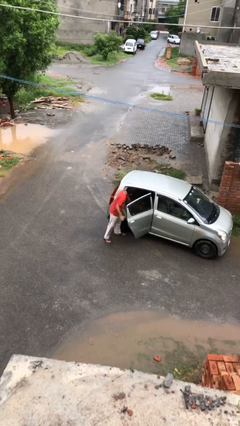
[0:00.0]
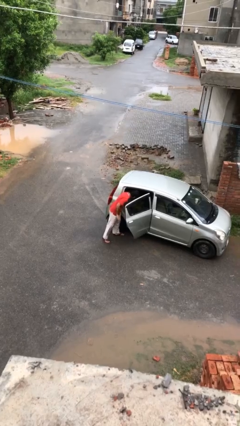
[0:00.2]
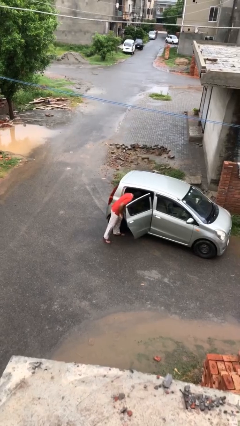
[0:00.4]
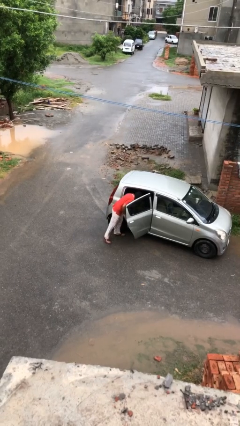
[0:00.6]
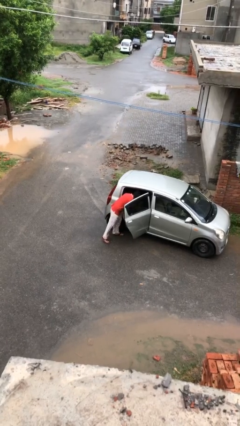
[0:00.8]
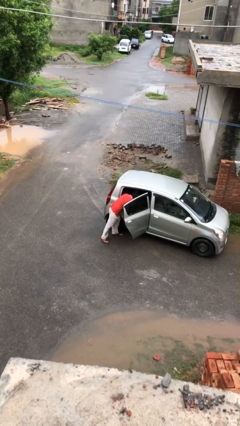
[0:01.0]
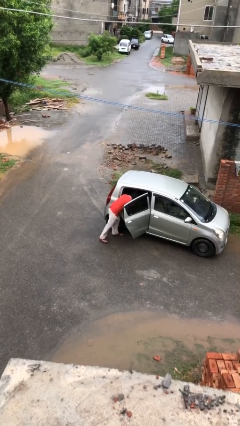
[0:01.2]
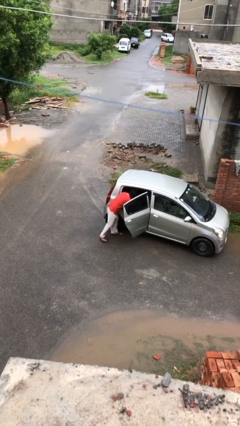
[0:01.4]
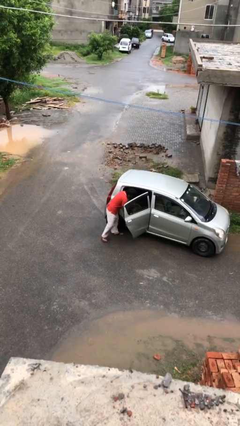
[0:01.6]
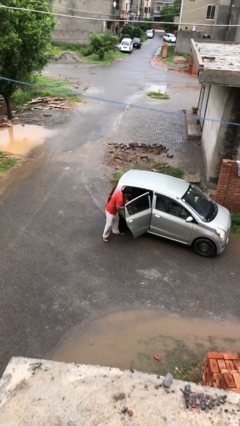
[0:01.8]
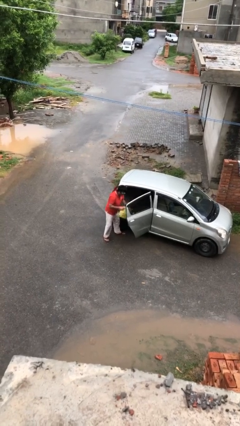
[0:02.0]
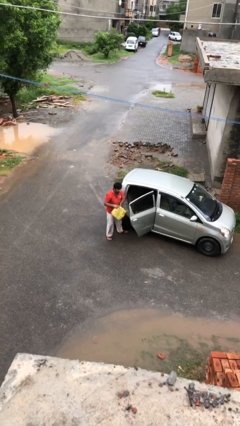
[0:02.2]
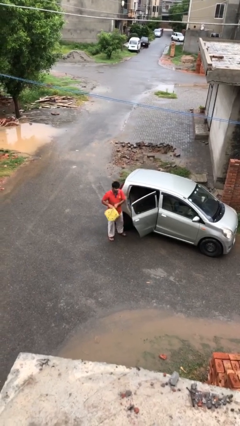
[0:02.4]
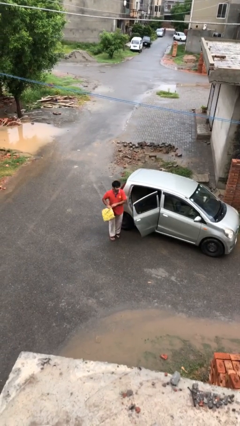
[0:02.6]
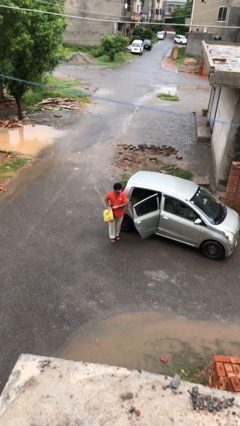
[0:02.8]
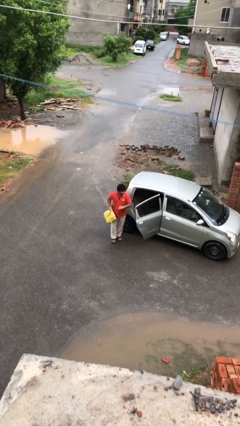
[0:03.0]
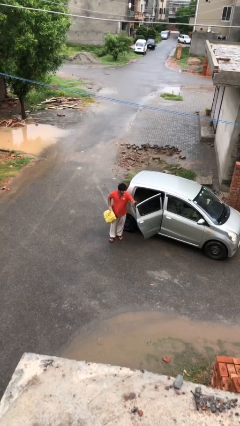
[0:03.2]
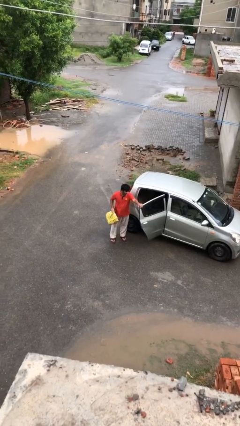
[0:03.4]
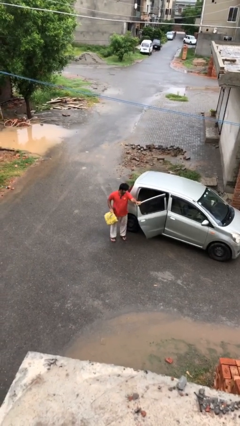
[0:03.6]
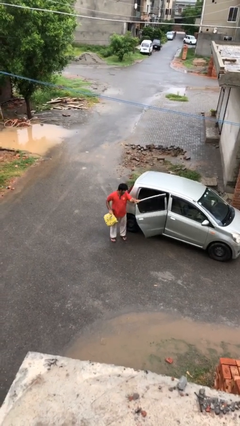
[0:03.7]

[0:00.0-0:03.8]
person unloads car

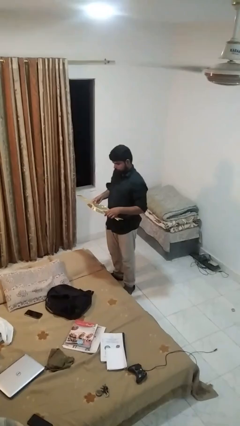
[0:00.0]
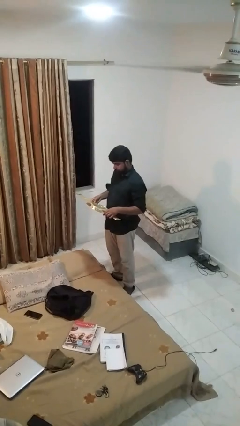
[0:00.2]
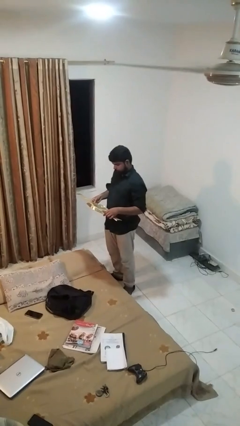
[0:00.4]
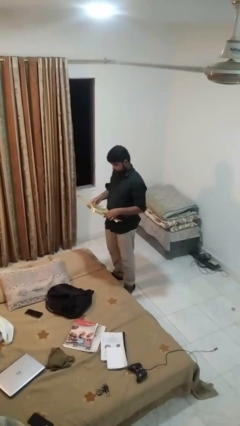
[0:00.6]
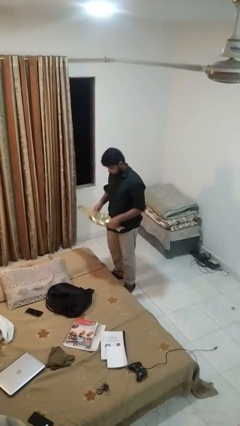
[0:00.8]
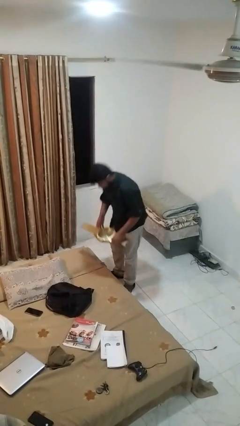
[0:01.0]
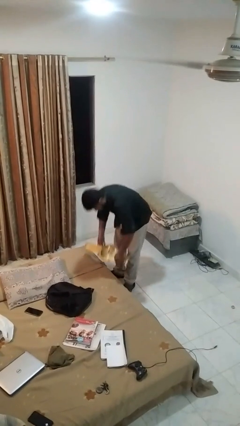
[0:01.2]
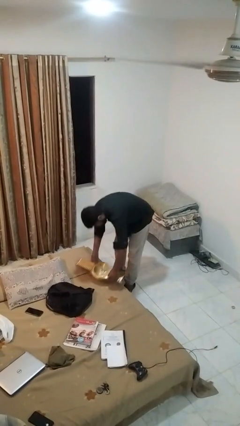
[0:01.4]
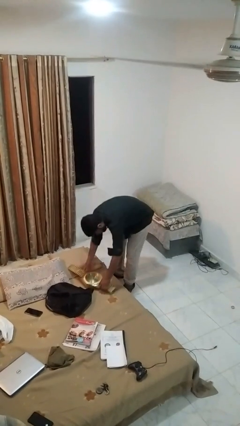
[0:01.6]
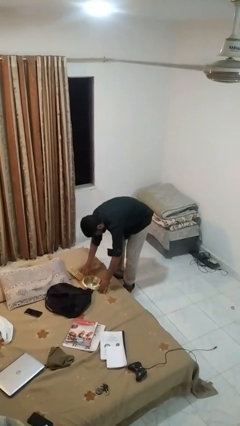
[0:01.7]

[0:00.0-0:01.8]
person puts down object on bed

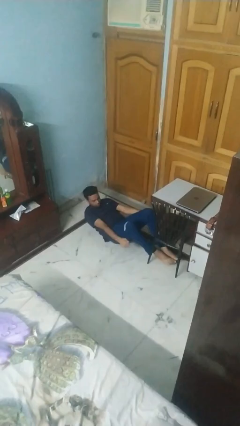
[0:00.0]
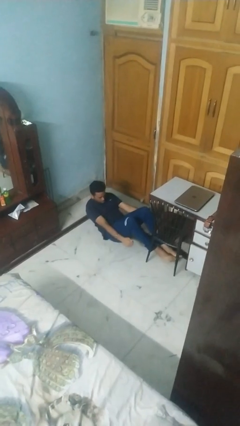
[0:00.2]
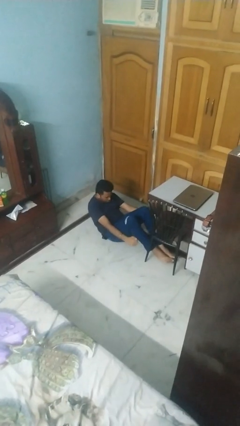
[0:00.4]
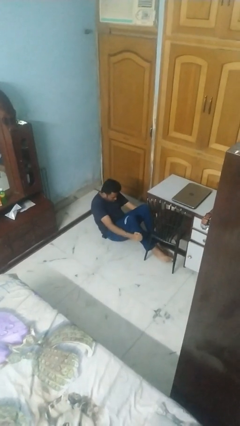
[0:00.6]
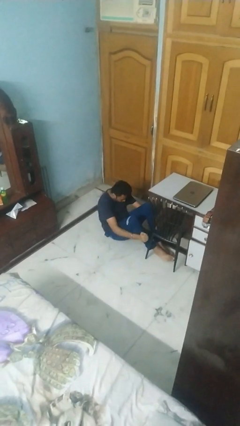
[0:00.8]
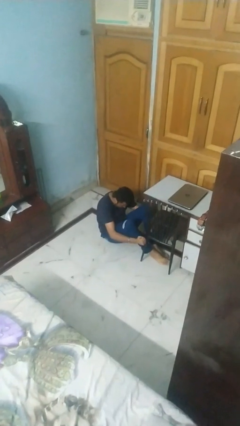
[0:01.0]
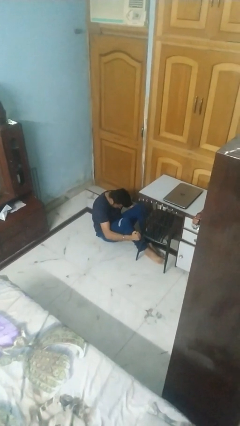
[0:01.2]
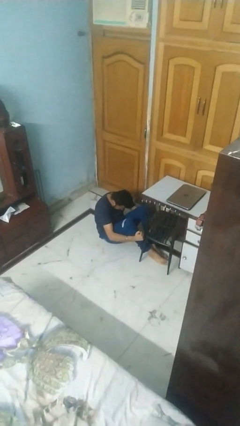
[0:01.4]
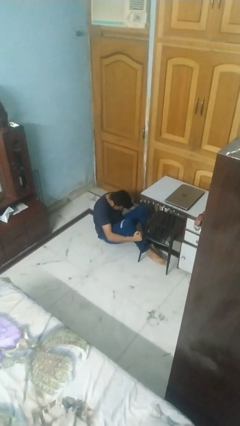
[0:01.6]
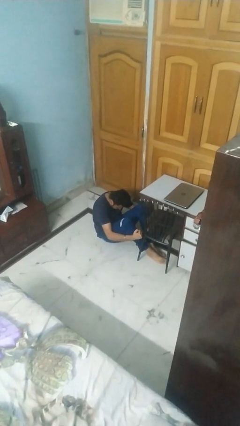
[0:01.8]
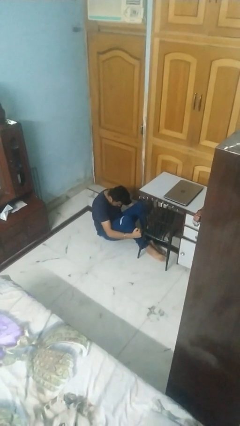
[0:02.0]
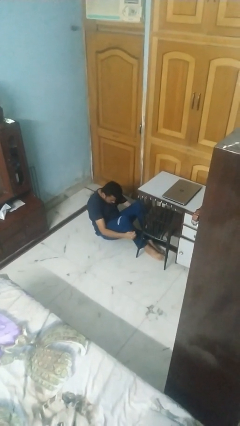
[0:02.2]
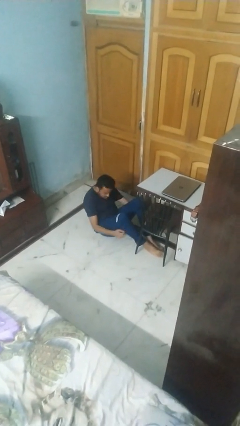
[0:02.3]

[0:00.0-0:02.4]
person exercises with situp

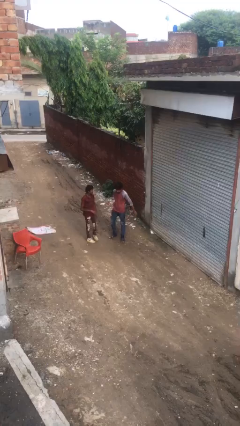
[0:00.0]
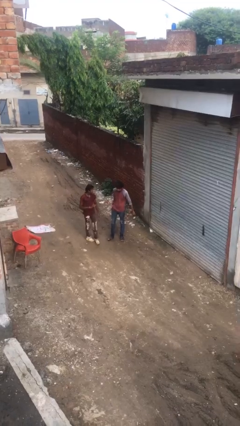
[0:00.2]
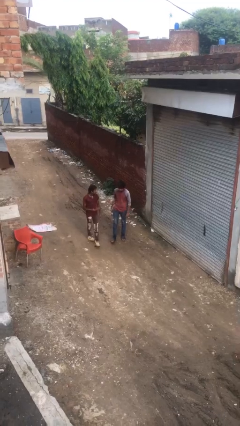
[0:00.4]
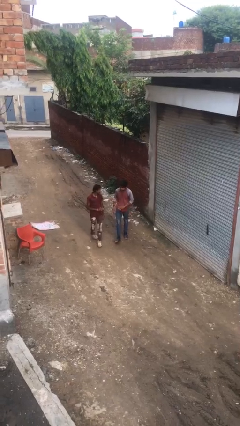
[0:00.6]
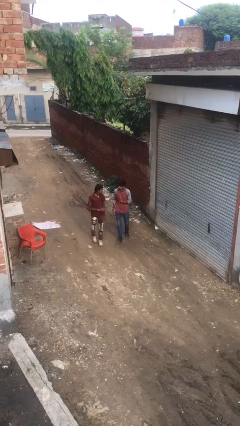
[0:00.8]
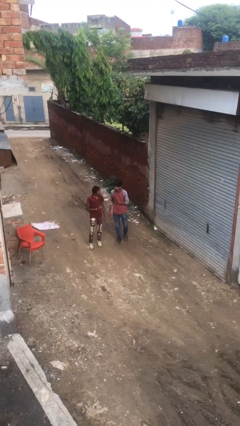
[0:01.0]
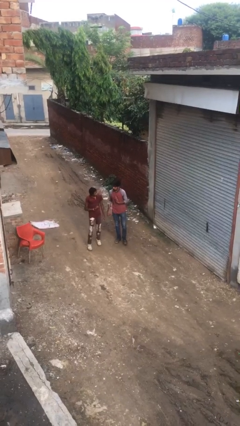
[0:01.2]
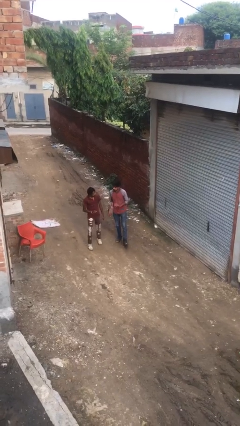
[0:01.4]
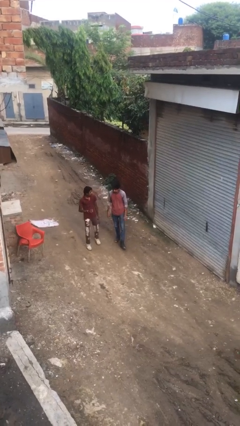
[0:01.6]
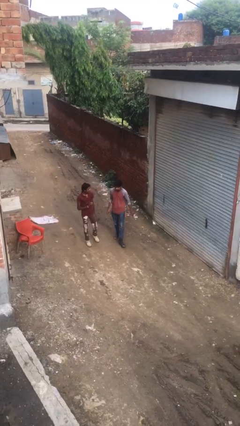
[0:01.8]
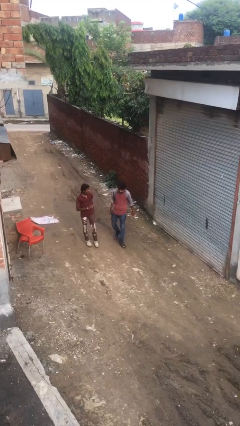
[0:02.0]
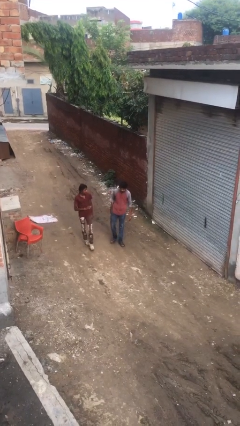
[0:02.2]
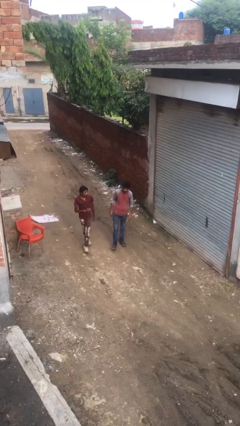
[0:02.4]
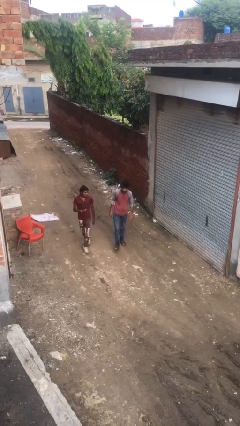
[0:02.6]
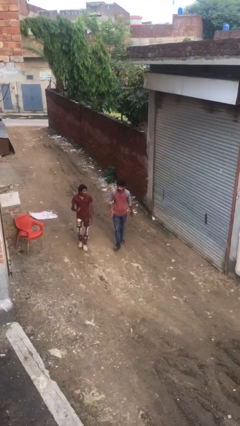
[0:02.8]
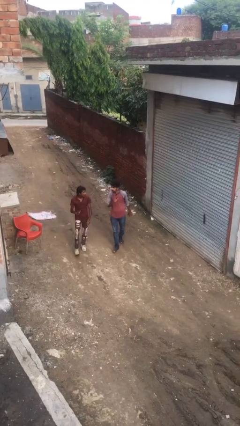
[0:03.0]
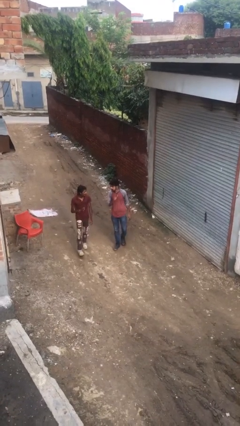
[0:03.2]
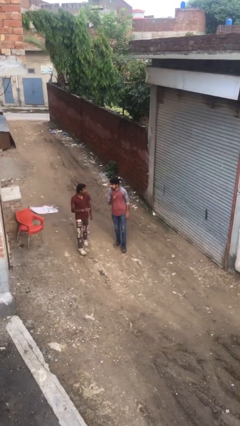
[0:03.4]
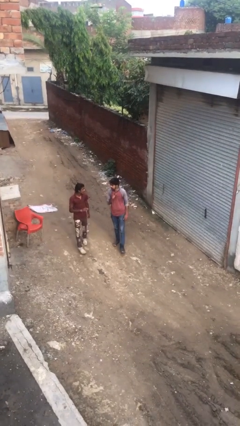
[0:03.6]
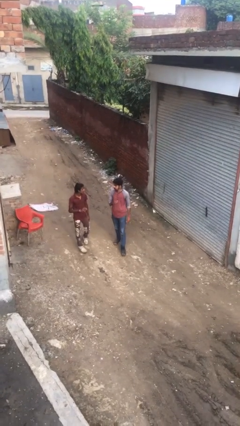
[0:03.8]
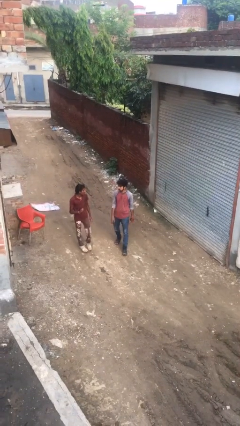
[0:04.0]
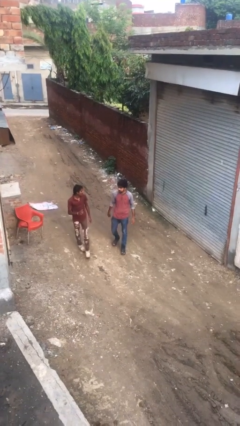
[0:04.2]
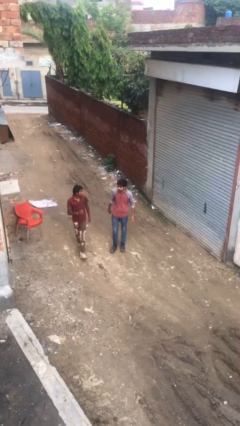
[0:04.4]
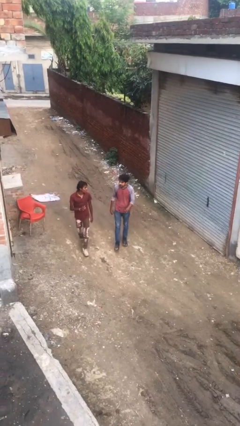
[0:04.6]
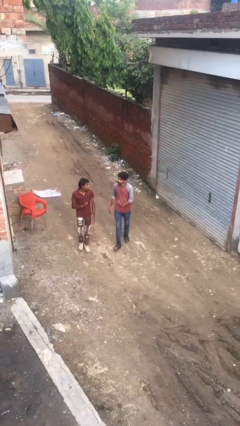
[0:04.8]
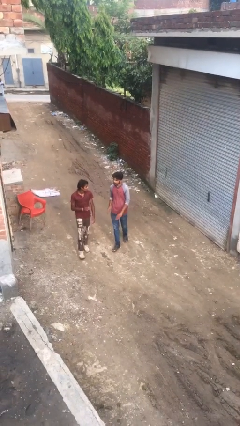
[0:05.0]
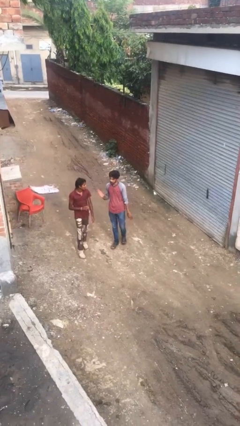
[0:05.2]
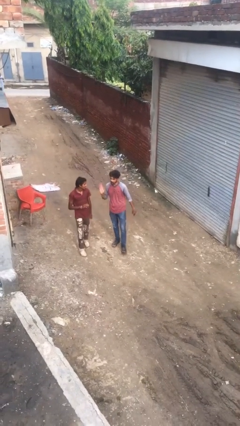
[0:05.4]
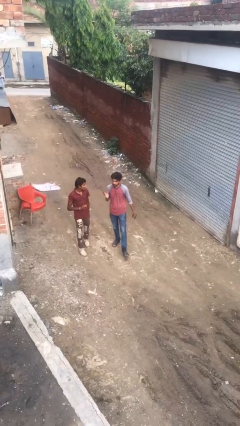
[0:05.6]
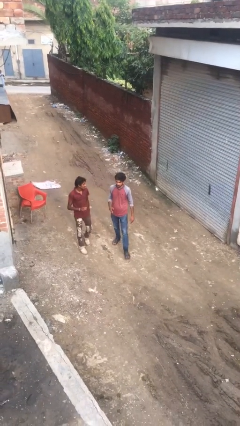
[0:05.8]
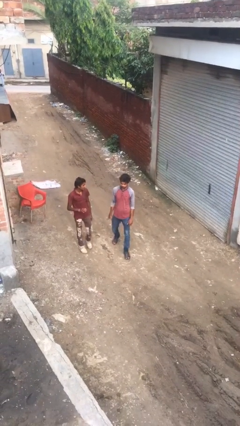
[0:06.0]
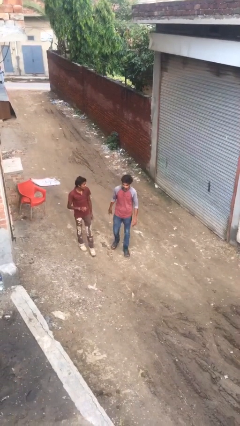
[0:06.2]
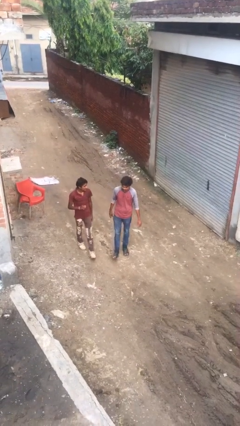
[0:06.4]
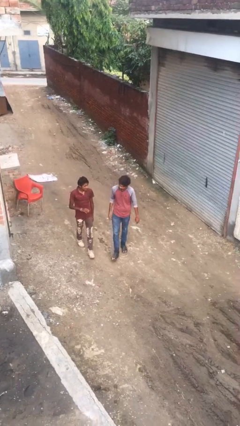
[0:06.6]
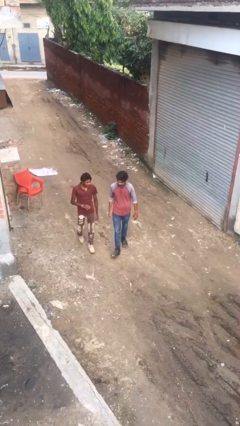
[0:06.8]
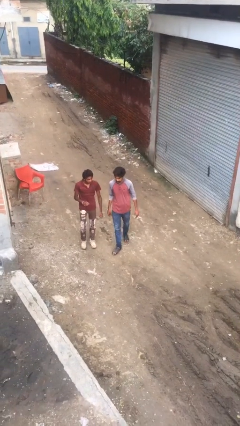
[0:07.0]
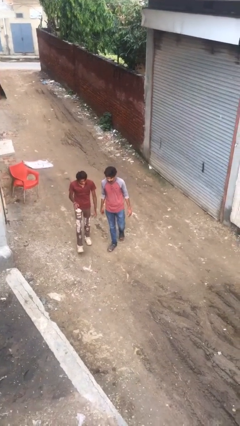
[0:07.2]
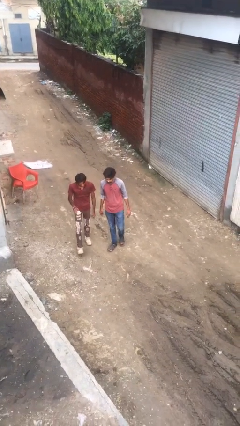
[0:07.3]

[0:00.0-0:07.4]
person talks to person

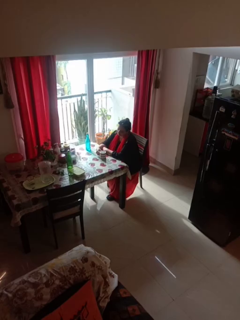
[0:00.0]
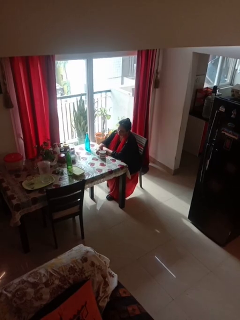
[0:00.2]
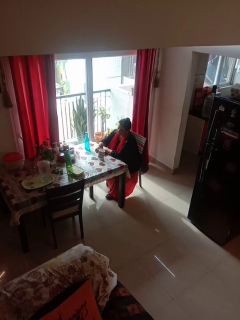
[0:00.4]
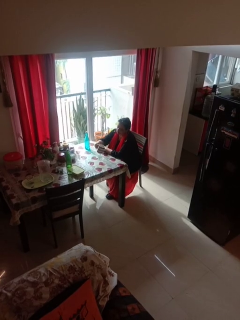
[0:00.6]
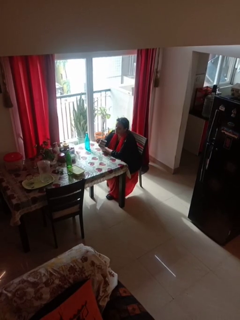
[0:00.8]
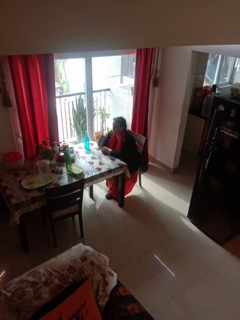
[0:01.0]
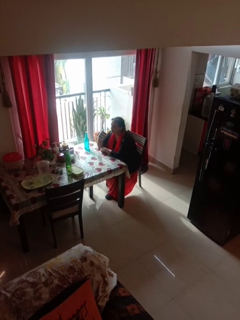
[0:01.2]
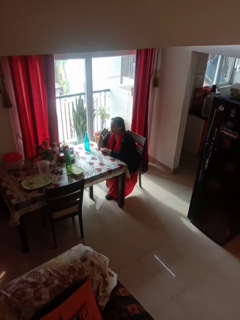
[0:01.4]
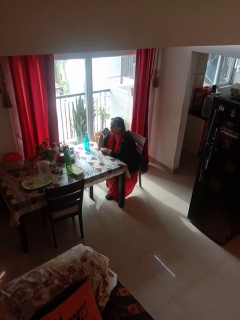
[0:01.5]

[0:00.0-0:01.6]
person picks up object from table

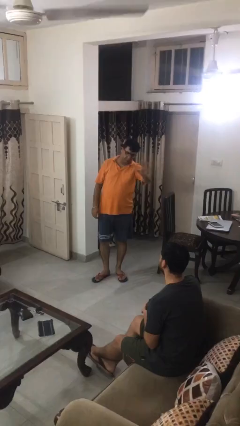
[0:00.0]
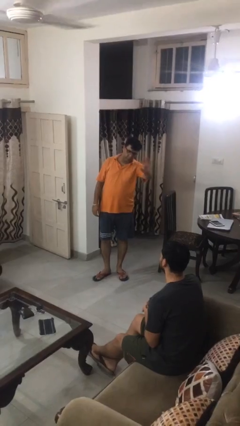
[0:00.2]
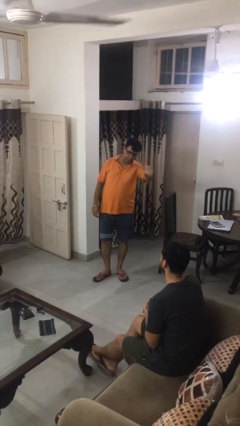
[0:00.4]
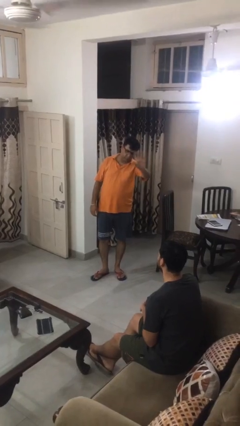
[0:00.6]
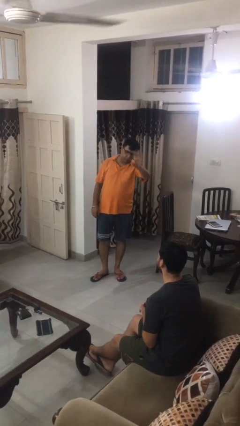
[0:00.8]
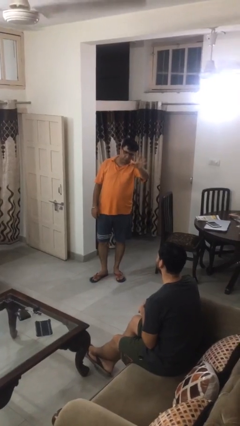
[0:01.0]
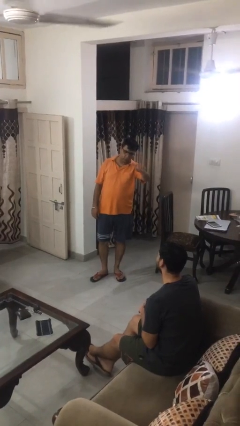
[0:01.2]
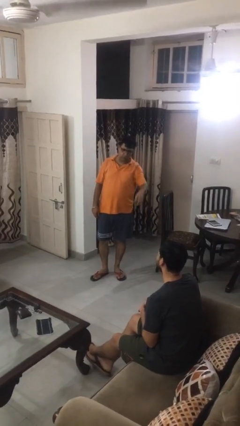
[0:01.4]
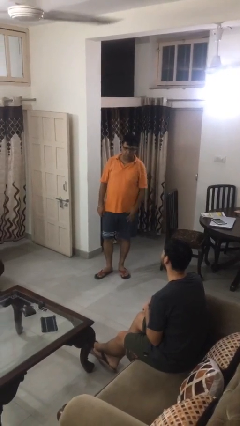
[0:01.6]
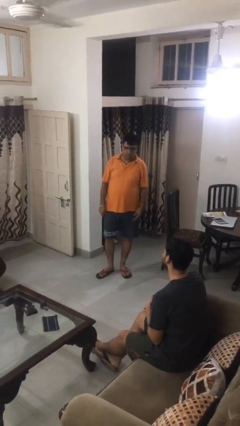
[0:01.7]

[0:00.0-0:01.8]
person waves at person
